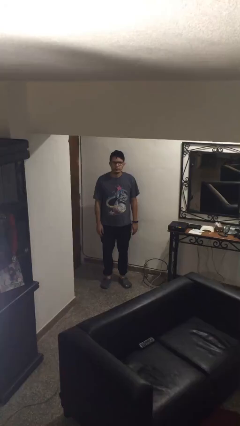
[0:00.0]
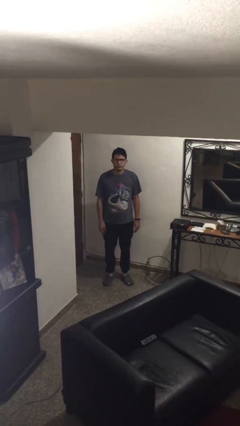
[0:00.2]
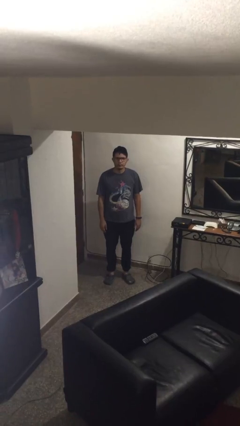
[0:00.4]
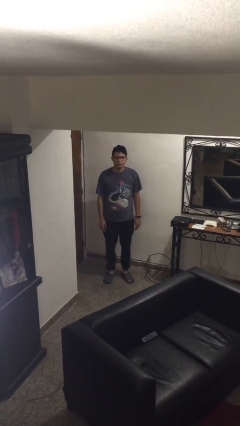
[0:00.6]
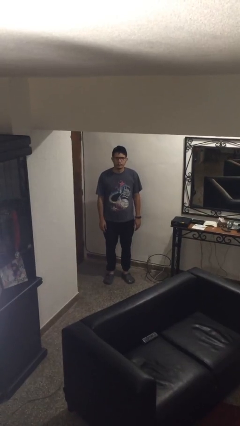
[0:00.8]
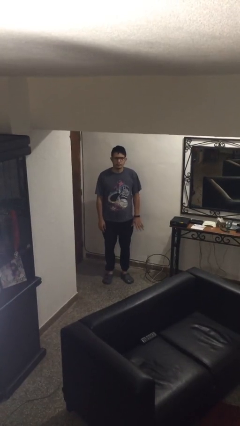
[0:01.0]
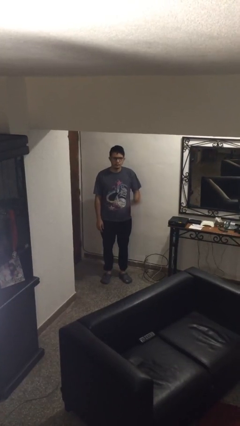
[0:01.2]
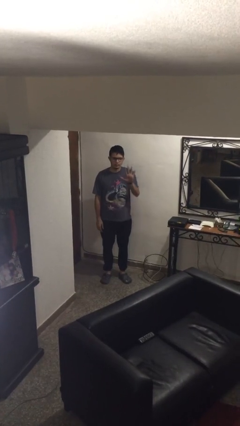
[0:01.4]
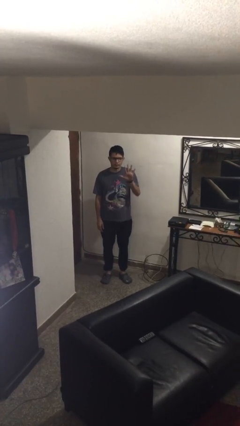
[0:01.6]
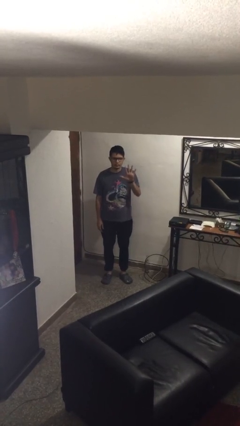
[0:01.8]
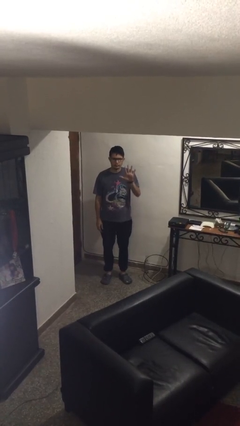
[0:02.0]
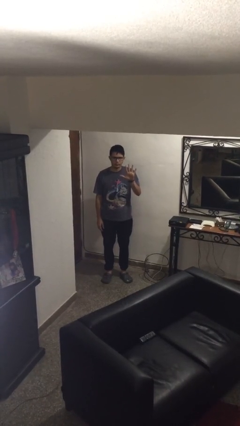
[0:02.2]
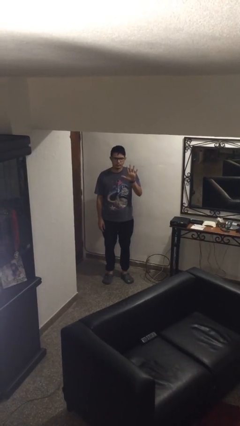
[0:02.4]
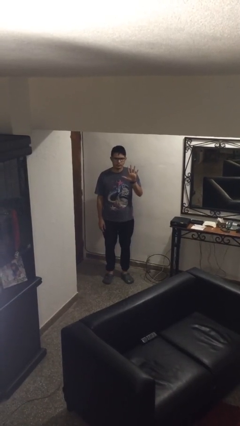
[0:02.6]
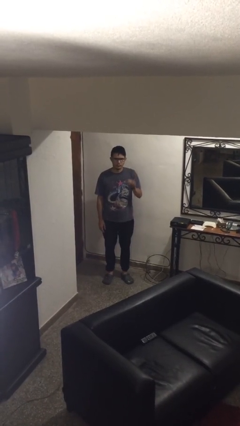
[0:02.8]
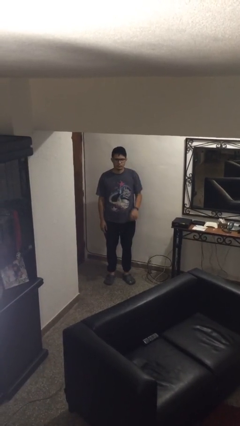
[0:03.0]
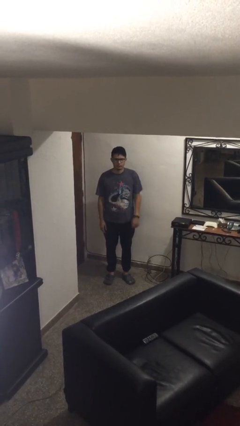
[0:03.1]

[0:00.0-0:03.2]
person gestures number five

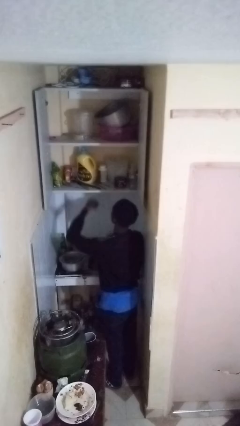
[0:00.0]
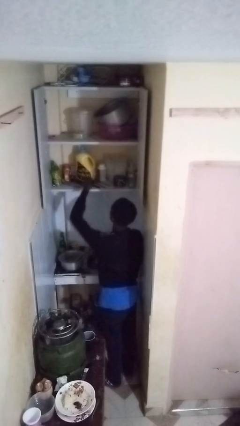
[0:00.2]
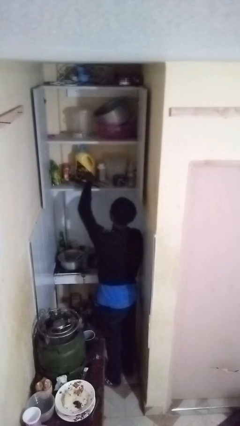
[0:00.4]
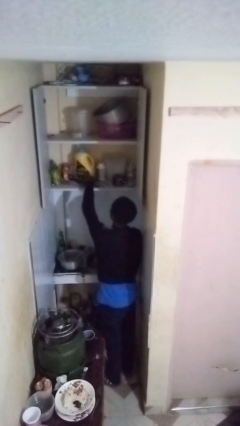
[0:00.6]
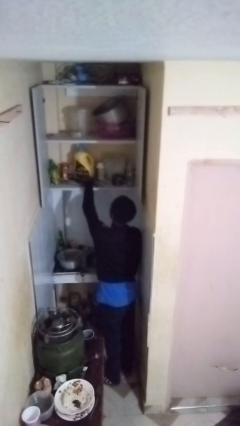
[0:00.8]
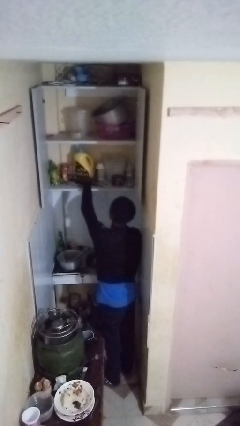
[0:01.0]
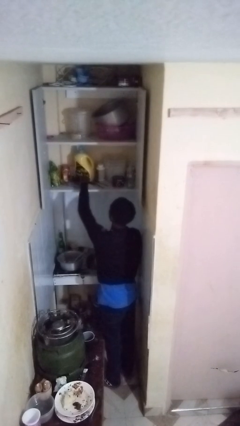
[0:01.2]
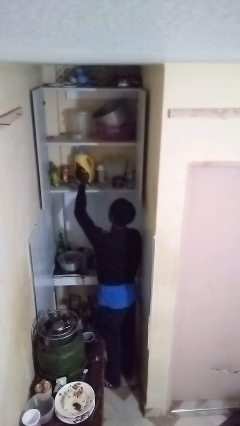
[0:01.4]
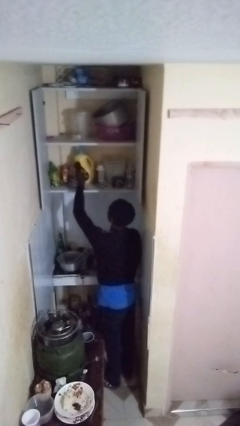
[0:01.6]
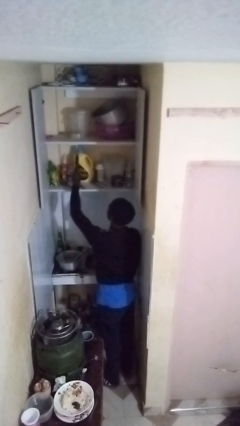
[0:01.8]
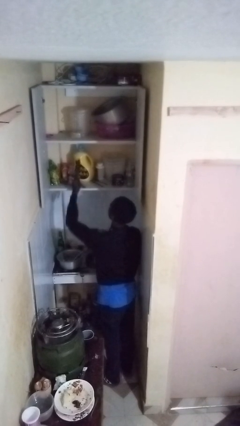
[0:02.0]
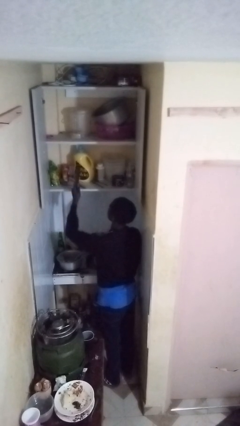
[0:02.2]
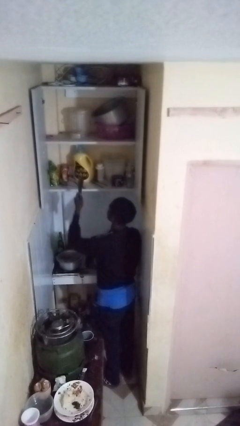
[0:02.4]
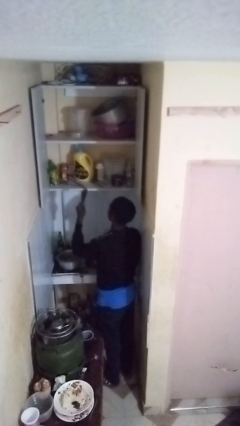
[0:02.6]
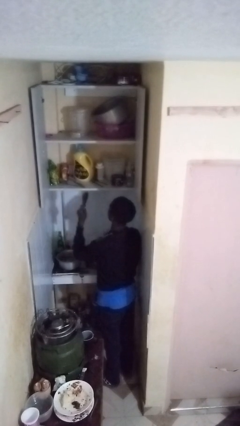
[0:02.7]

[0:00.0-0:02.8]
person takes object from kitchen drawer

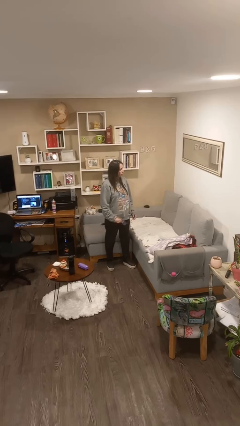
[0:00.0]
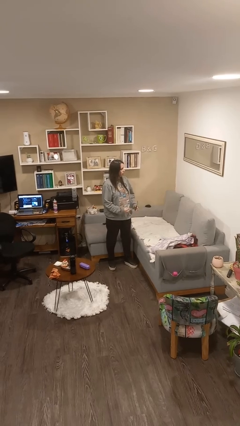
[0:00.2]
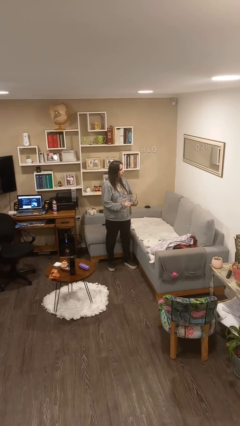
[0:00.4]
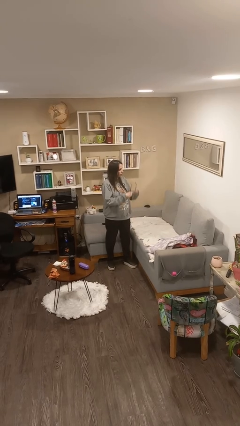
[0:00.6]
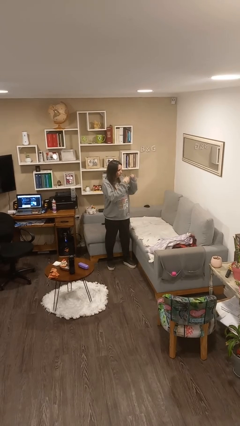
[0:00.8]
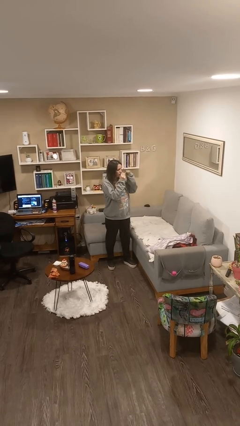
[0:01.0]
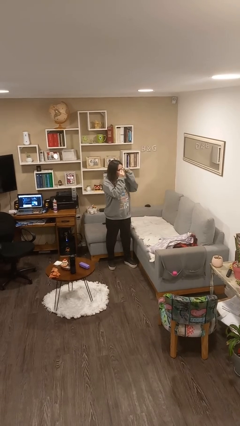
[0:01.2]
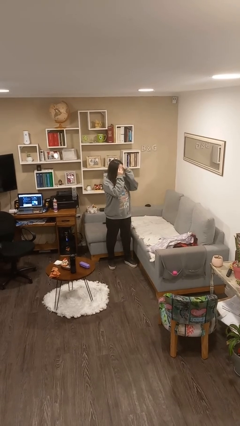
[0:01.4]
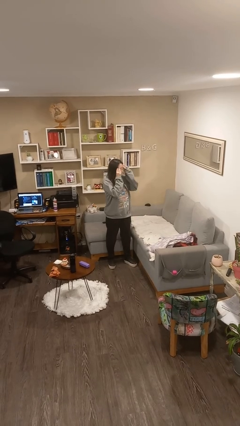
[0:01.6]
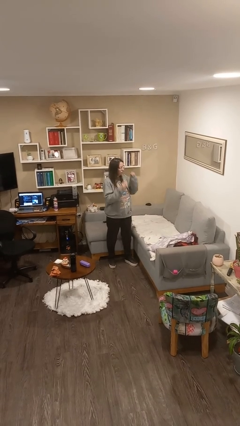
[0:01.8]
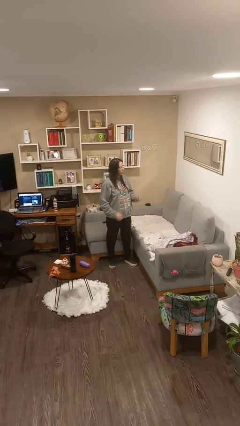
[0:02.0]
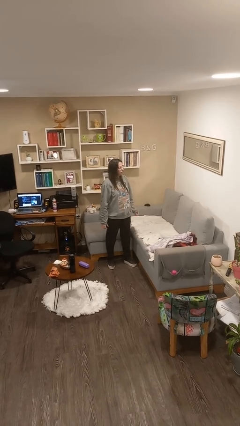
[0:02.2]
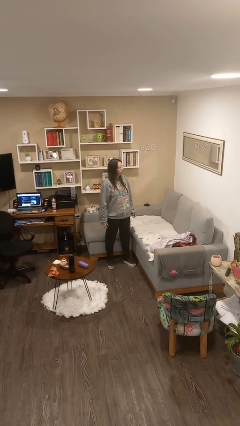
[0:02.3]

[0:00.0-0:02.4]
person puts on glasses

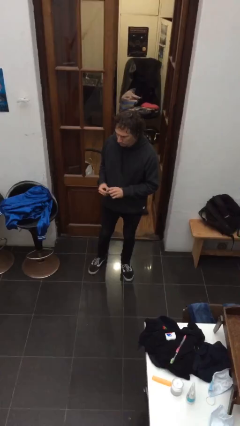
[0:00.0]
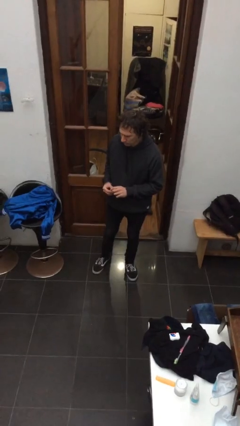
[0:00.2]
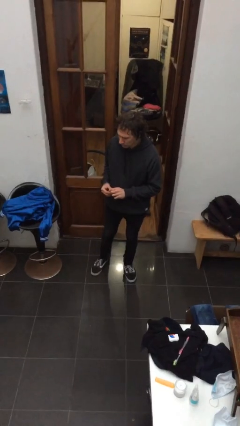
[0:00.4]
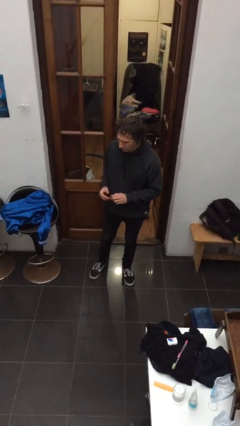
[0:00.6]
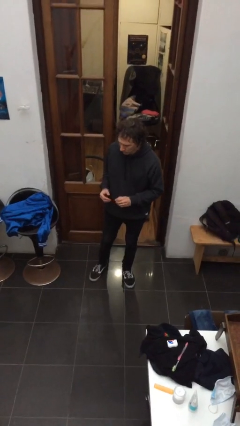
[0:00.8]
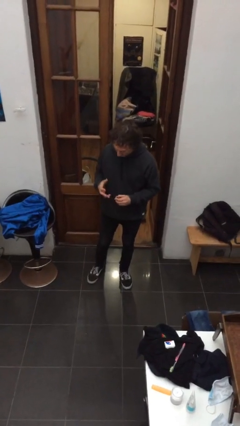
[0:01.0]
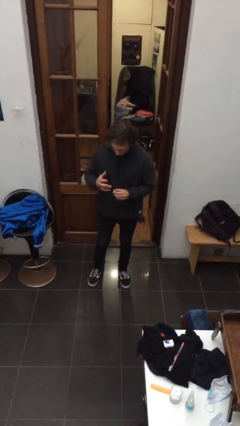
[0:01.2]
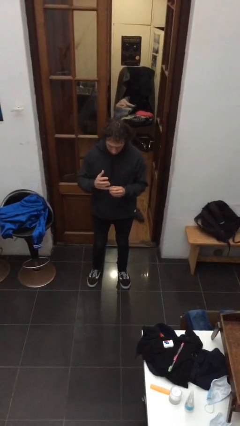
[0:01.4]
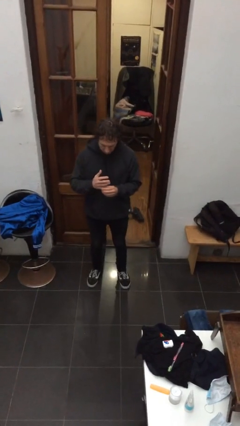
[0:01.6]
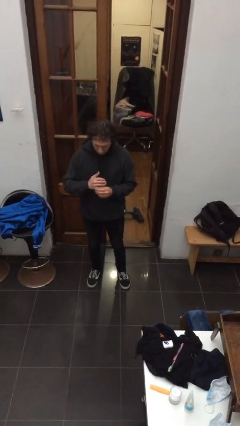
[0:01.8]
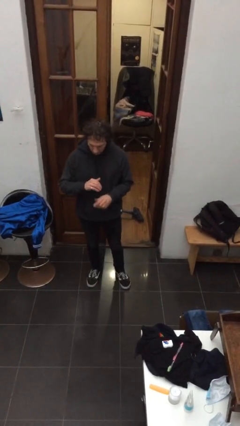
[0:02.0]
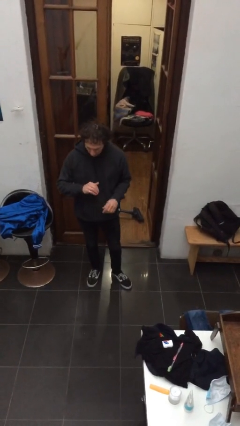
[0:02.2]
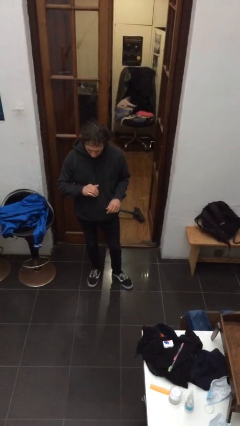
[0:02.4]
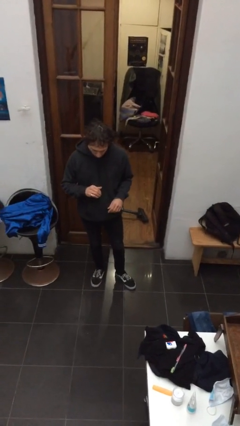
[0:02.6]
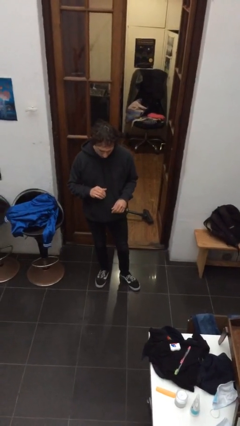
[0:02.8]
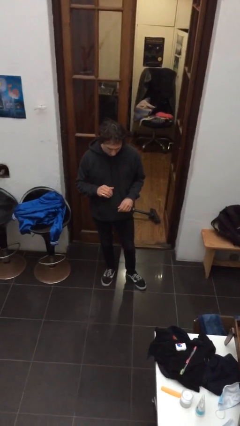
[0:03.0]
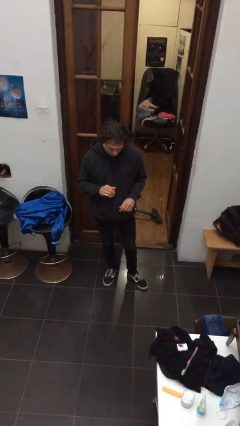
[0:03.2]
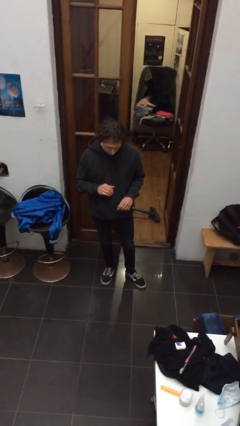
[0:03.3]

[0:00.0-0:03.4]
person puts on ring

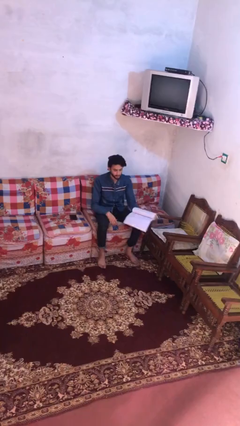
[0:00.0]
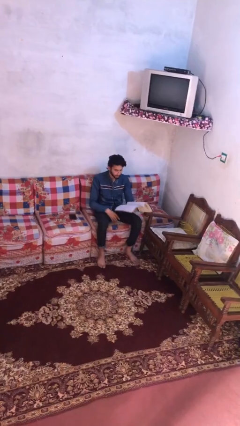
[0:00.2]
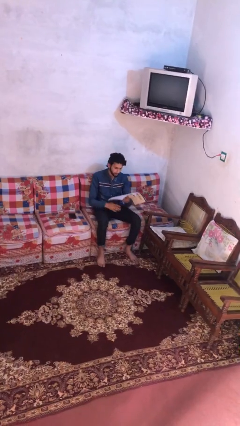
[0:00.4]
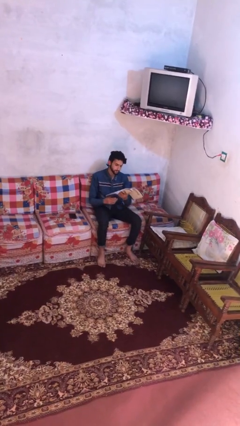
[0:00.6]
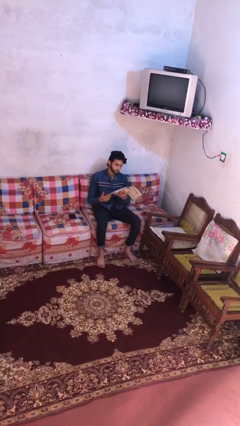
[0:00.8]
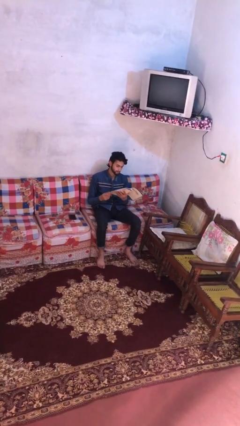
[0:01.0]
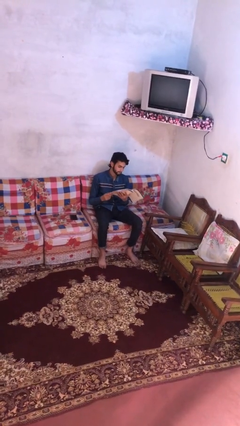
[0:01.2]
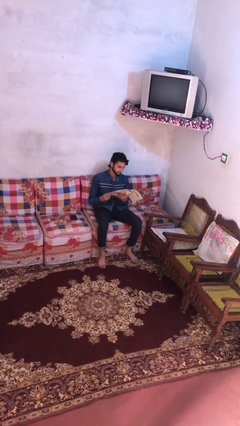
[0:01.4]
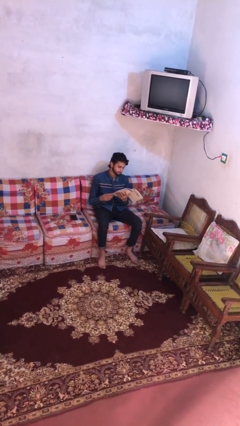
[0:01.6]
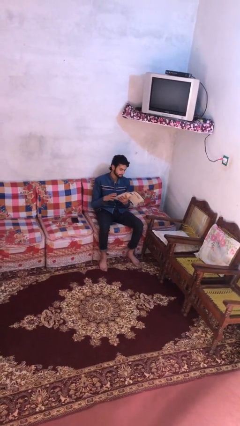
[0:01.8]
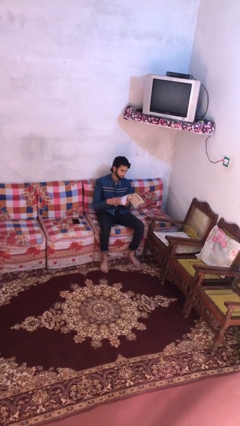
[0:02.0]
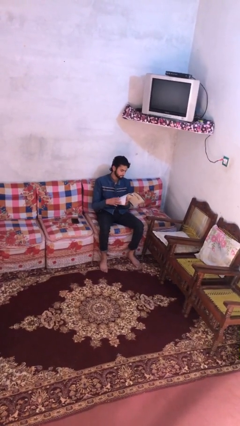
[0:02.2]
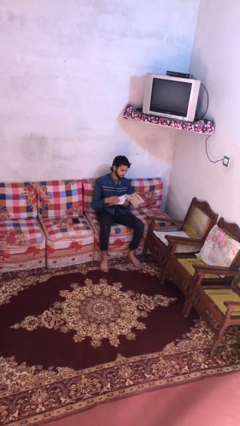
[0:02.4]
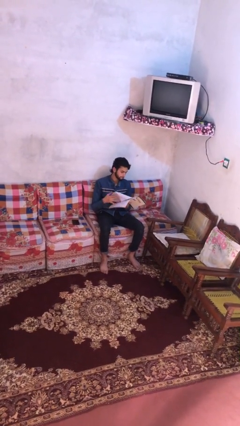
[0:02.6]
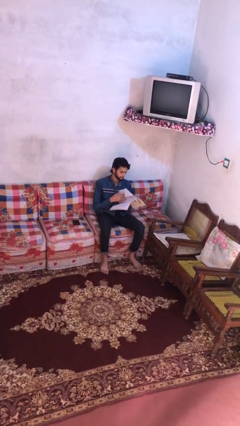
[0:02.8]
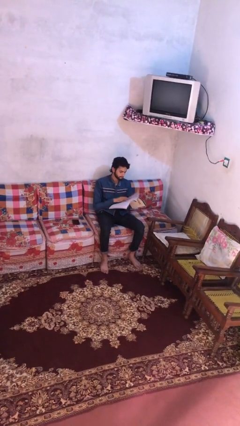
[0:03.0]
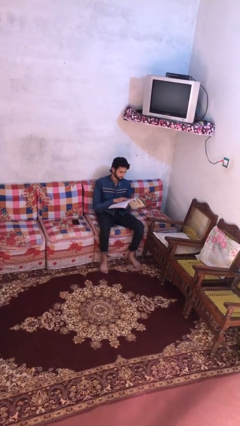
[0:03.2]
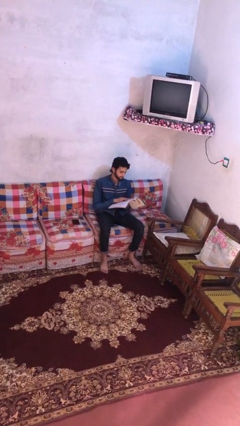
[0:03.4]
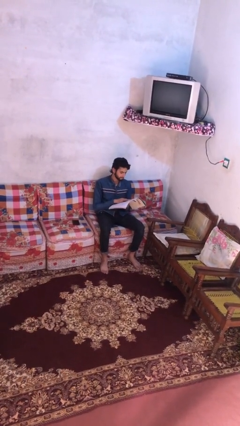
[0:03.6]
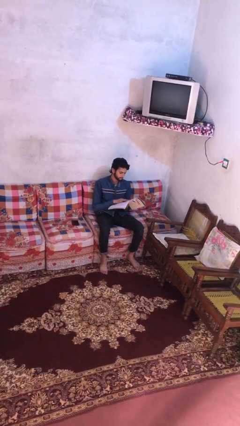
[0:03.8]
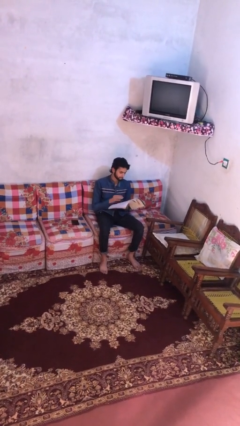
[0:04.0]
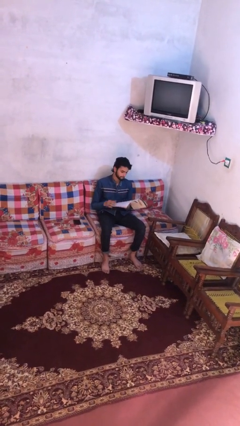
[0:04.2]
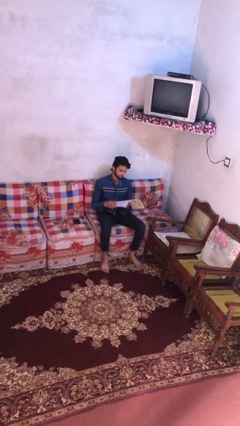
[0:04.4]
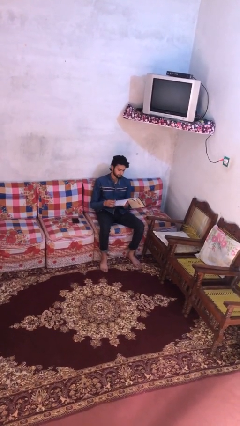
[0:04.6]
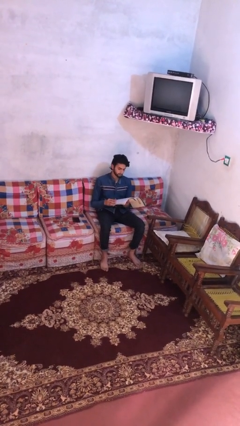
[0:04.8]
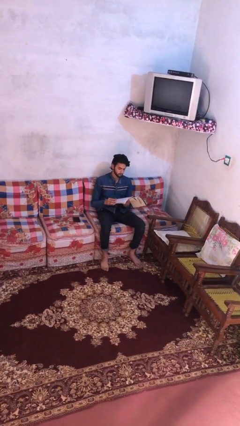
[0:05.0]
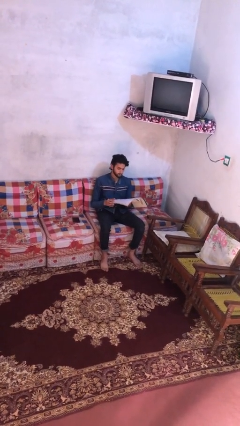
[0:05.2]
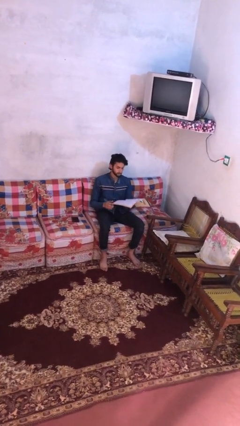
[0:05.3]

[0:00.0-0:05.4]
person reads document

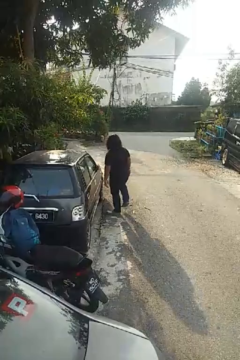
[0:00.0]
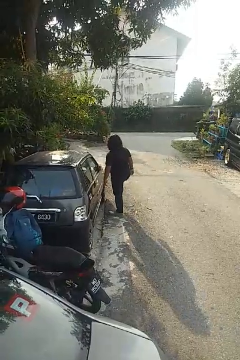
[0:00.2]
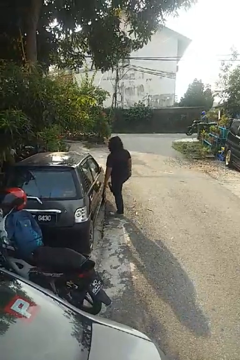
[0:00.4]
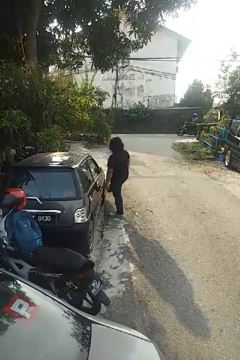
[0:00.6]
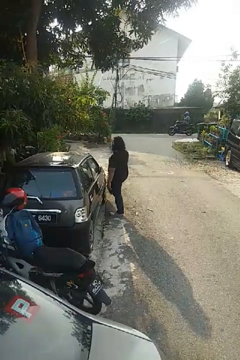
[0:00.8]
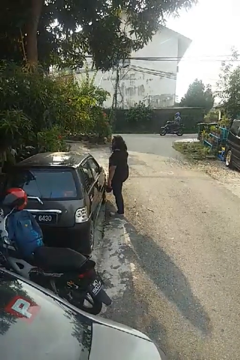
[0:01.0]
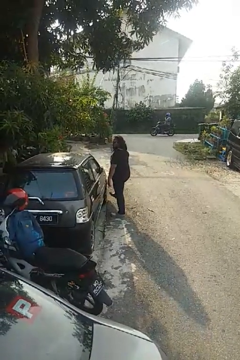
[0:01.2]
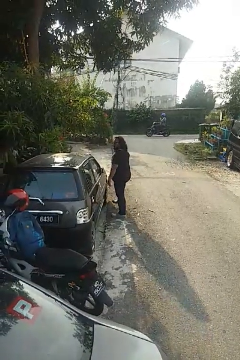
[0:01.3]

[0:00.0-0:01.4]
person kicks car tires
